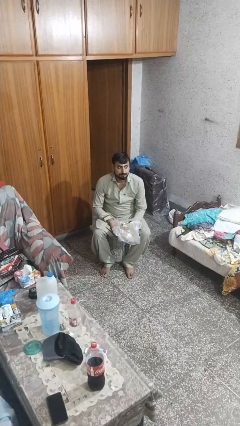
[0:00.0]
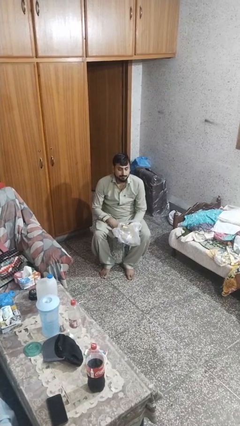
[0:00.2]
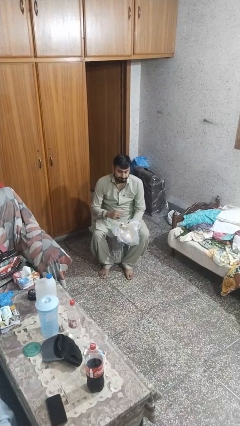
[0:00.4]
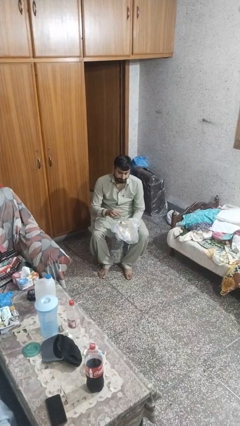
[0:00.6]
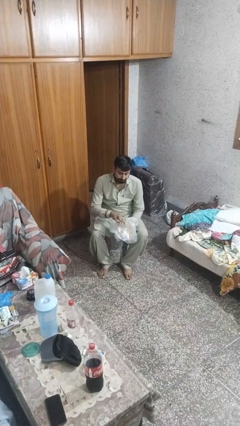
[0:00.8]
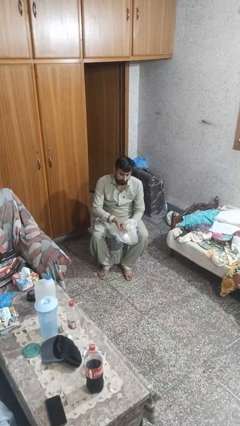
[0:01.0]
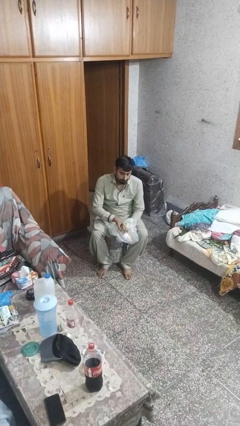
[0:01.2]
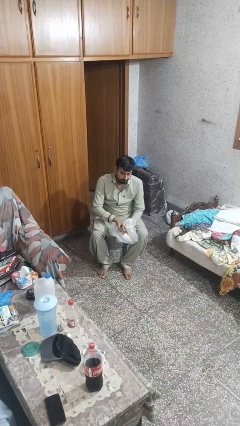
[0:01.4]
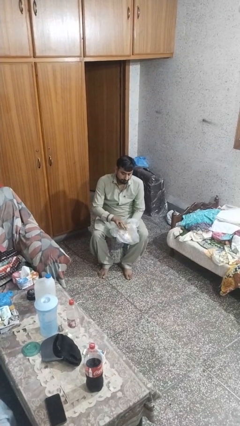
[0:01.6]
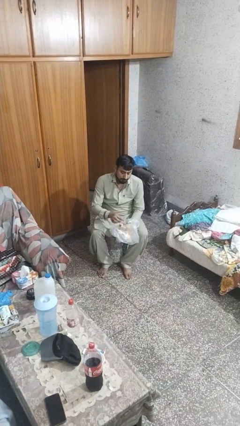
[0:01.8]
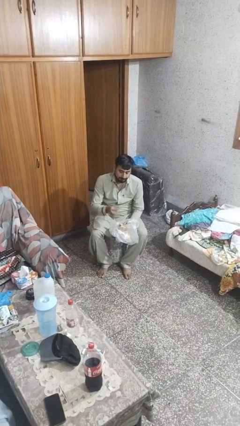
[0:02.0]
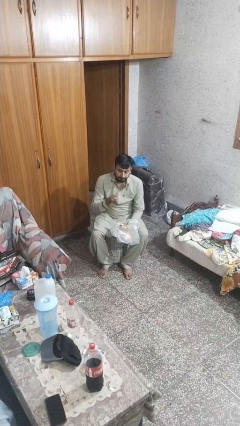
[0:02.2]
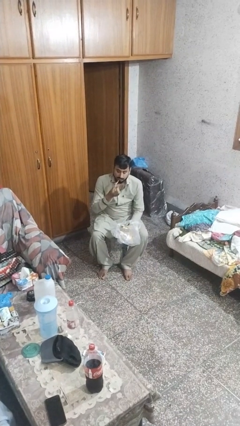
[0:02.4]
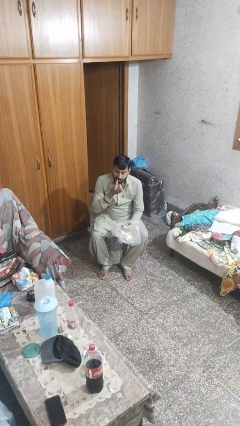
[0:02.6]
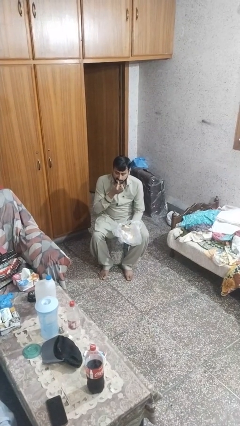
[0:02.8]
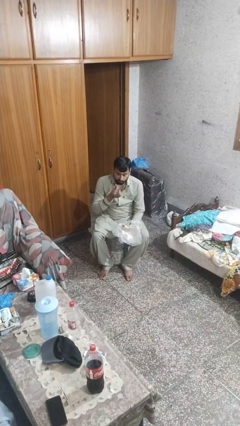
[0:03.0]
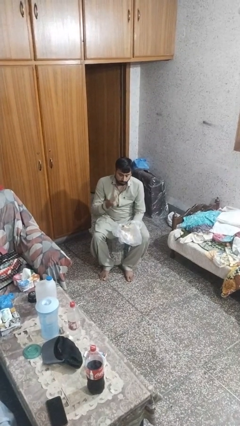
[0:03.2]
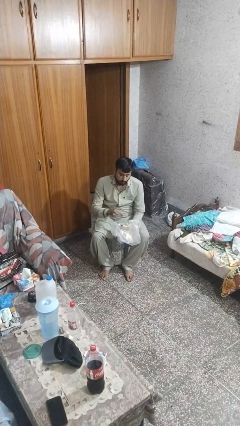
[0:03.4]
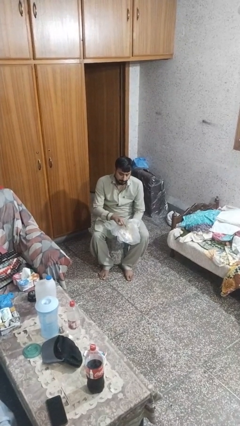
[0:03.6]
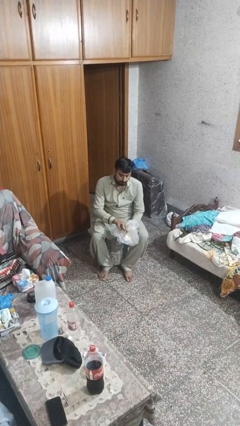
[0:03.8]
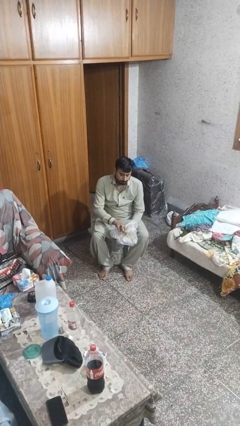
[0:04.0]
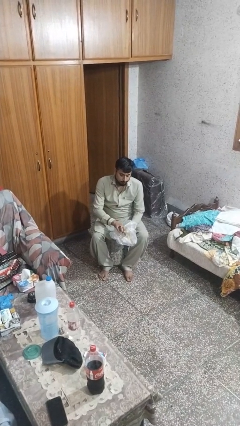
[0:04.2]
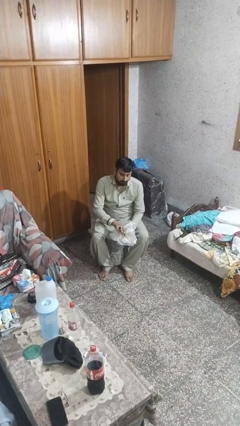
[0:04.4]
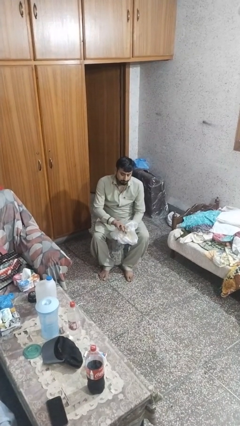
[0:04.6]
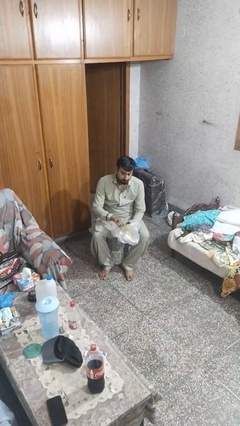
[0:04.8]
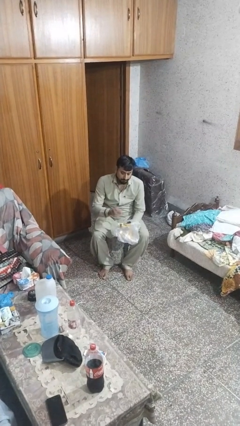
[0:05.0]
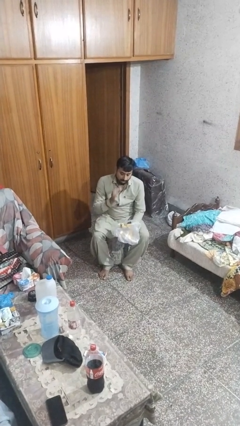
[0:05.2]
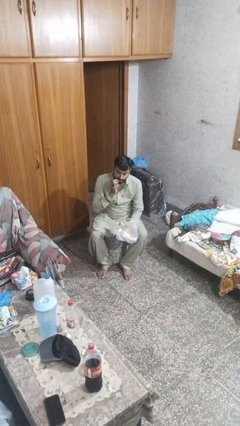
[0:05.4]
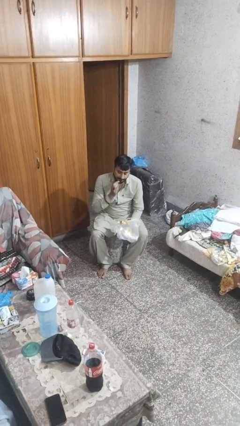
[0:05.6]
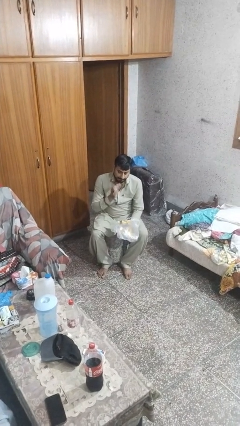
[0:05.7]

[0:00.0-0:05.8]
person eats snack from bag

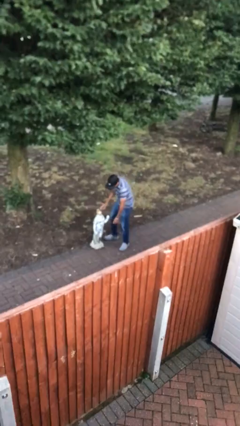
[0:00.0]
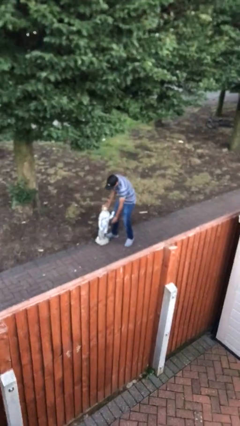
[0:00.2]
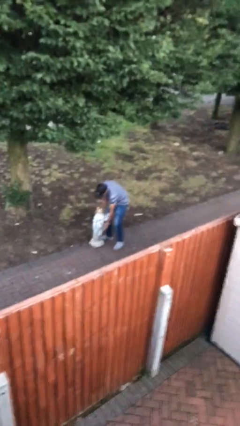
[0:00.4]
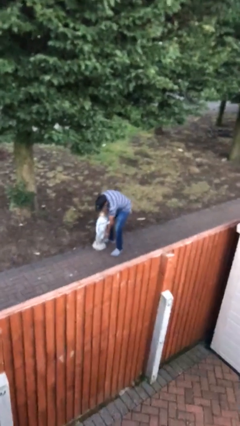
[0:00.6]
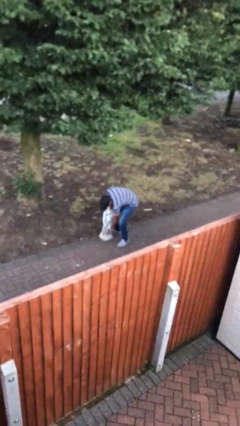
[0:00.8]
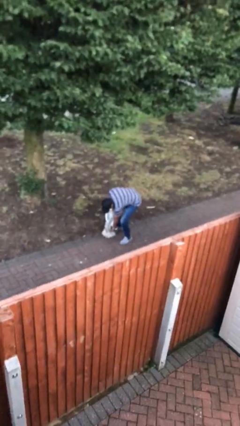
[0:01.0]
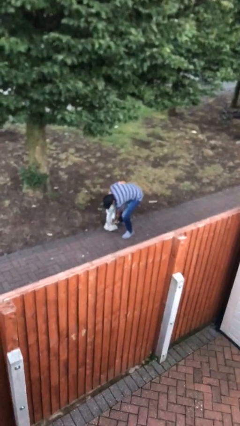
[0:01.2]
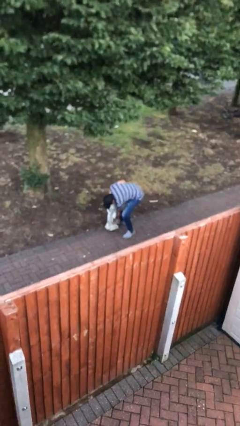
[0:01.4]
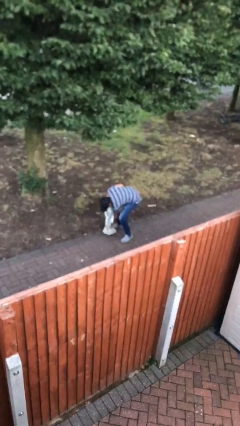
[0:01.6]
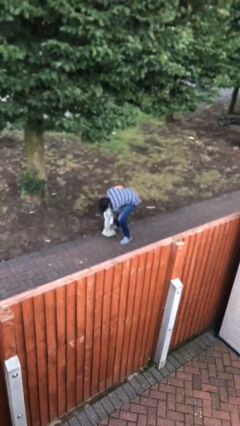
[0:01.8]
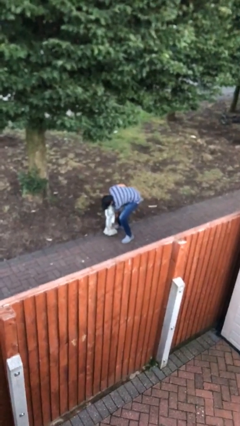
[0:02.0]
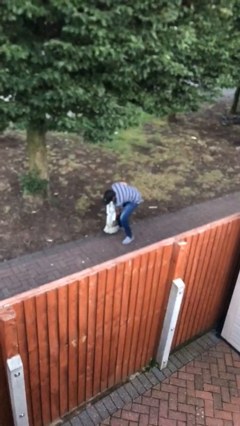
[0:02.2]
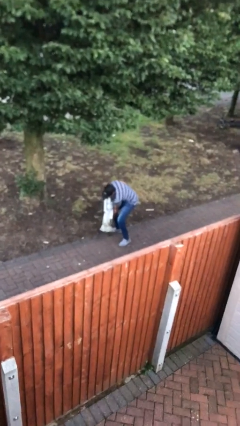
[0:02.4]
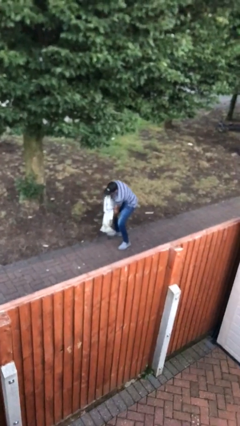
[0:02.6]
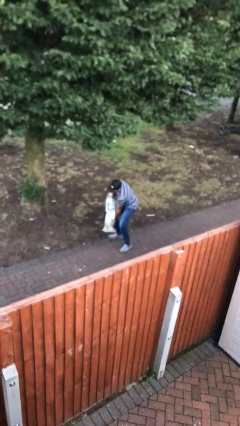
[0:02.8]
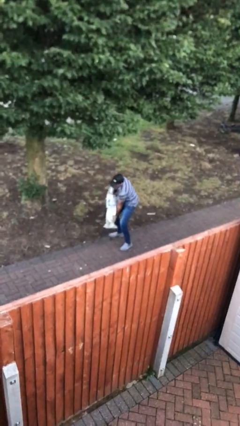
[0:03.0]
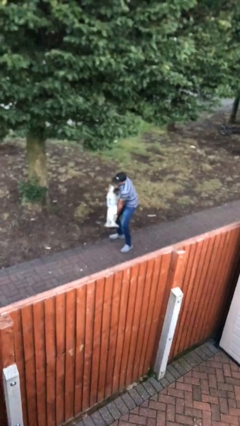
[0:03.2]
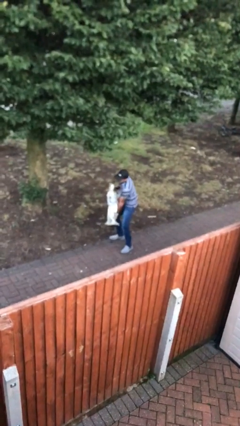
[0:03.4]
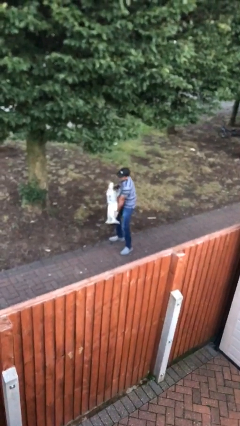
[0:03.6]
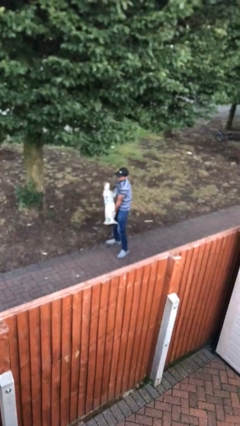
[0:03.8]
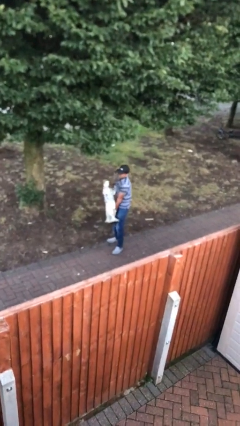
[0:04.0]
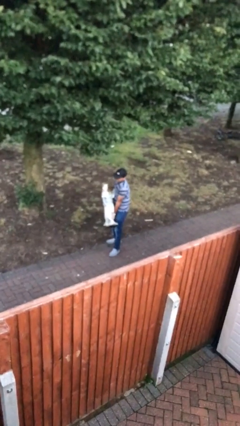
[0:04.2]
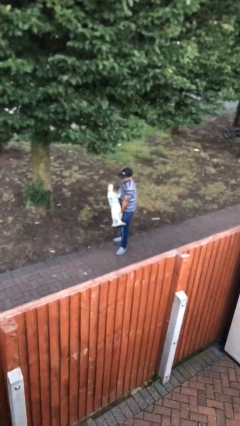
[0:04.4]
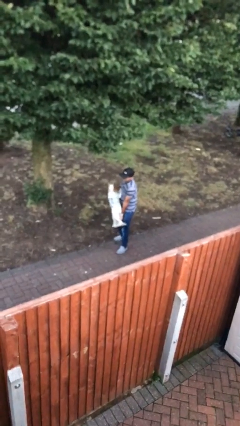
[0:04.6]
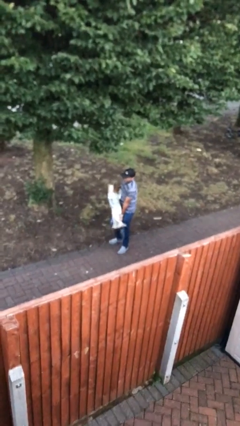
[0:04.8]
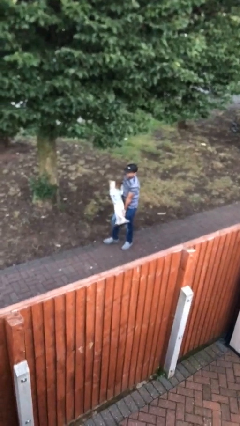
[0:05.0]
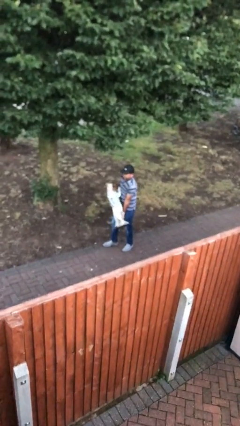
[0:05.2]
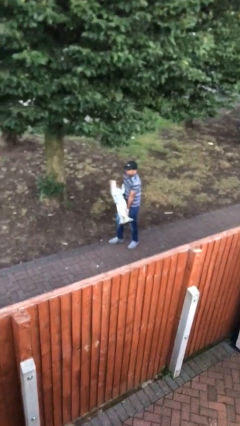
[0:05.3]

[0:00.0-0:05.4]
person picks up object from floor

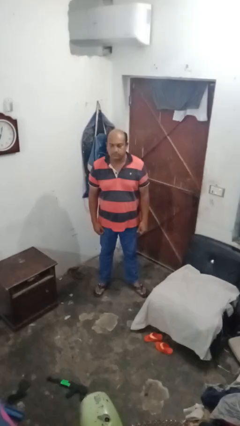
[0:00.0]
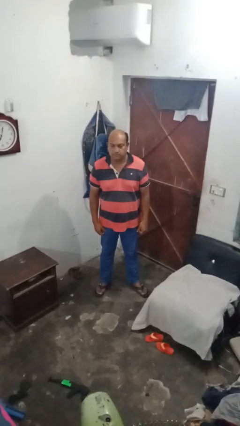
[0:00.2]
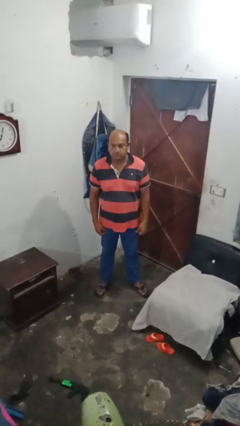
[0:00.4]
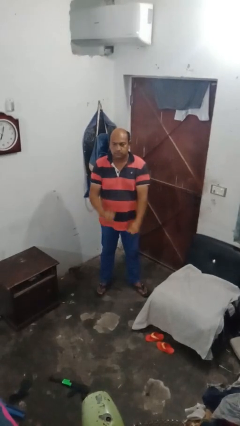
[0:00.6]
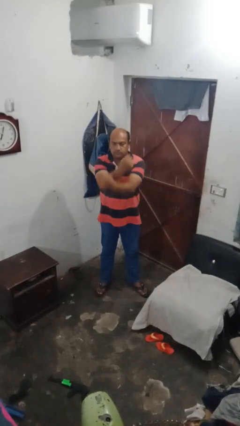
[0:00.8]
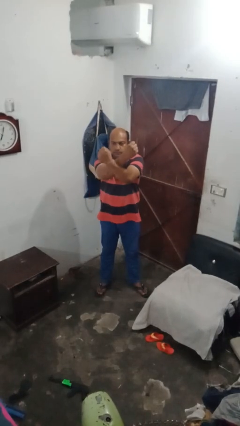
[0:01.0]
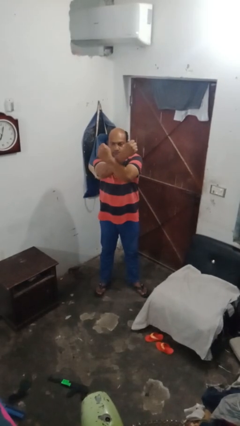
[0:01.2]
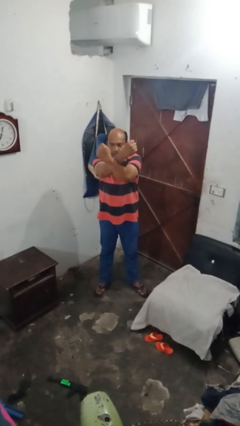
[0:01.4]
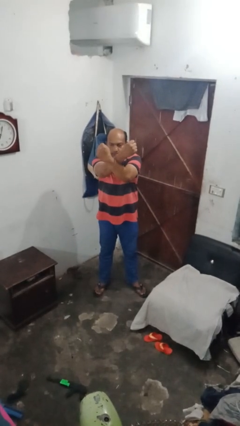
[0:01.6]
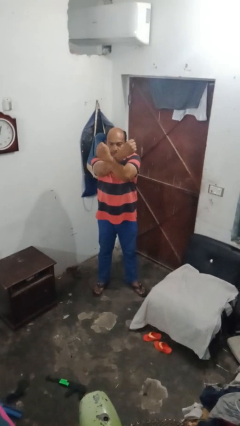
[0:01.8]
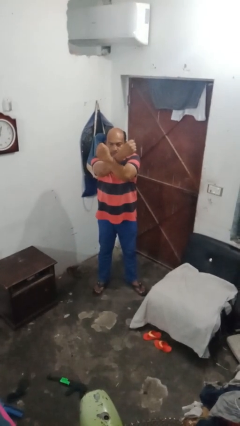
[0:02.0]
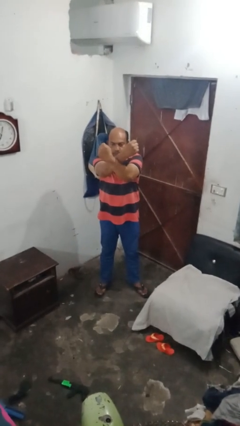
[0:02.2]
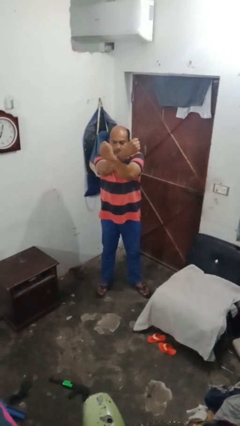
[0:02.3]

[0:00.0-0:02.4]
person gestures arms x

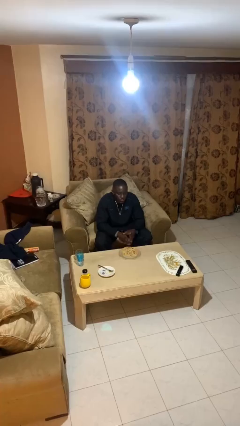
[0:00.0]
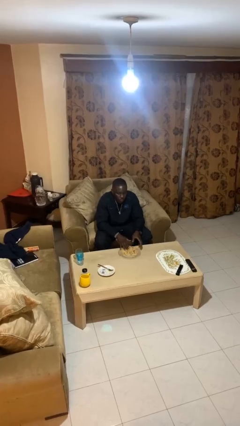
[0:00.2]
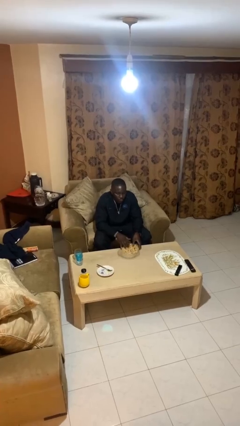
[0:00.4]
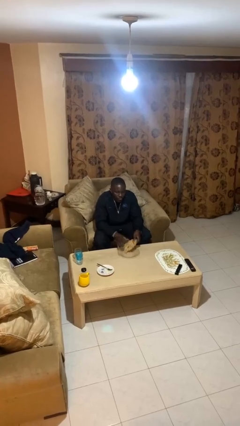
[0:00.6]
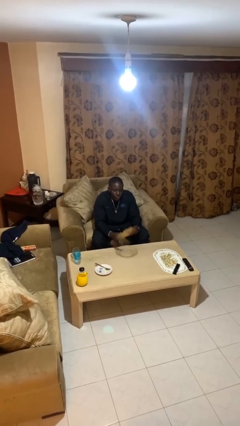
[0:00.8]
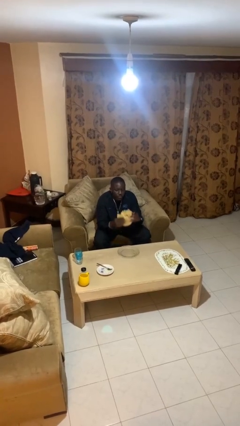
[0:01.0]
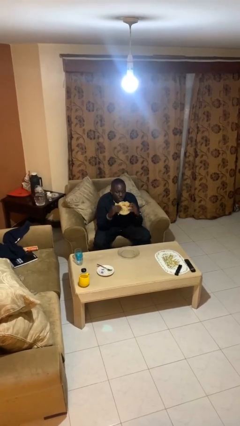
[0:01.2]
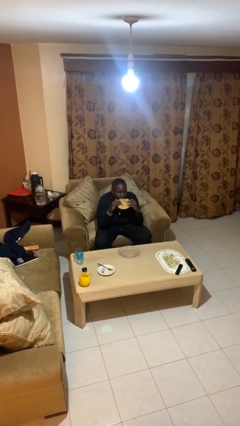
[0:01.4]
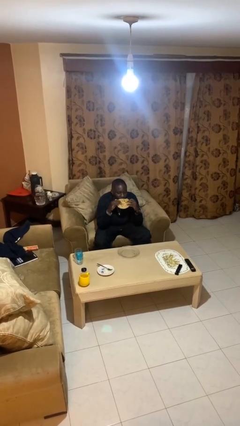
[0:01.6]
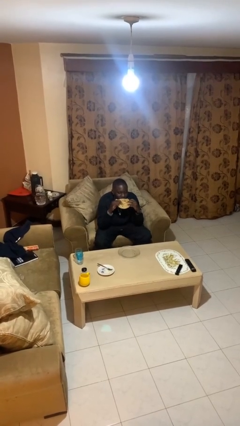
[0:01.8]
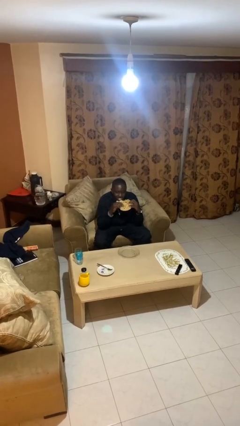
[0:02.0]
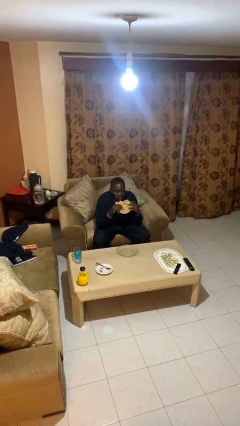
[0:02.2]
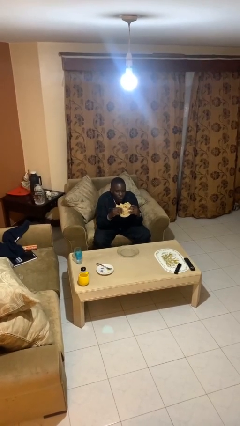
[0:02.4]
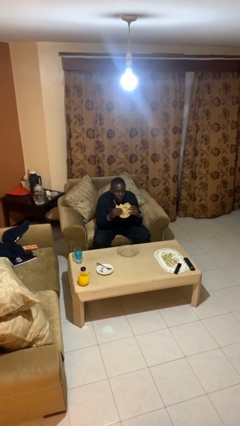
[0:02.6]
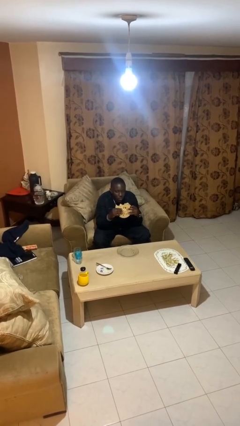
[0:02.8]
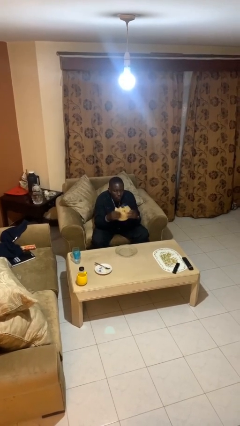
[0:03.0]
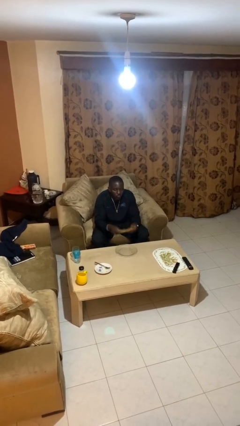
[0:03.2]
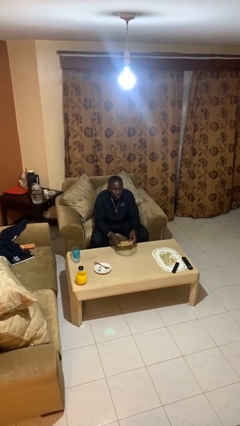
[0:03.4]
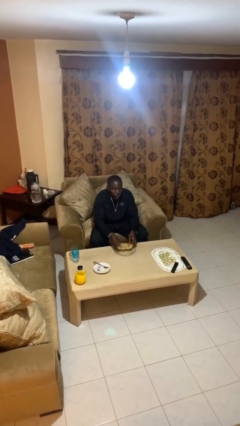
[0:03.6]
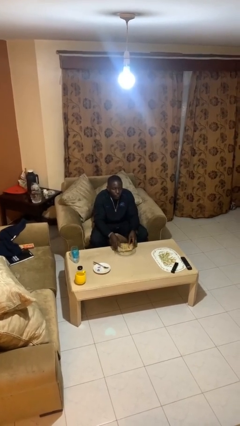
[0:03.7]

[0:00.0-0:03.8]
person eats with hands

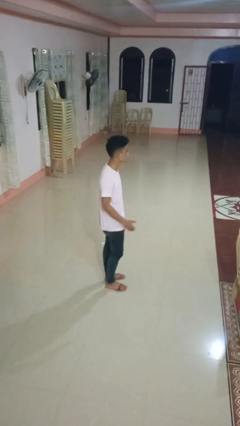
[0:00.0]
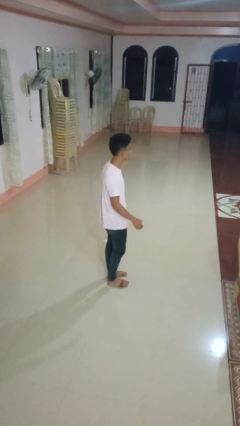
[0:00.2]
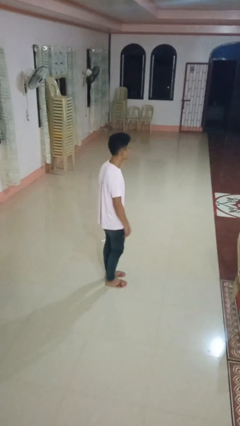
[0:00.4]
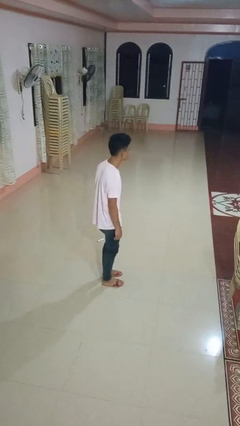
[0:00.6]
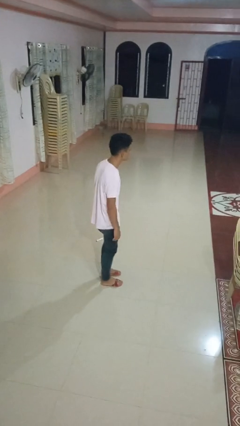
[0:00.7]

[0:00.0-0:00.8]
person slaps hands on thighs
